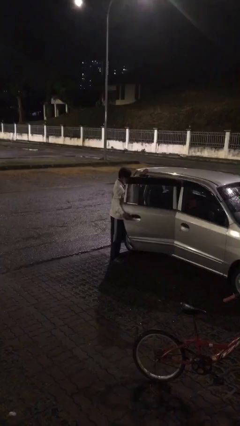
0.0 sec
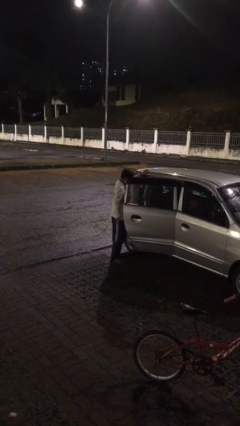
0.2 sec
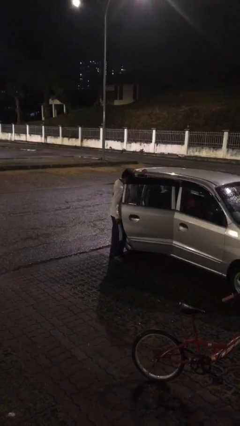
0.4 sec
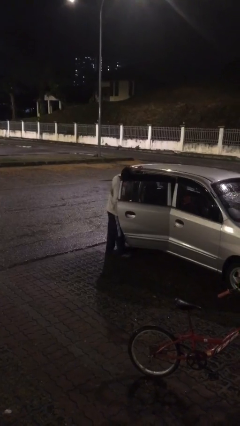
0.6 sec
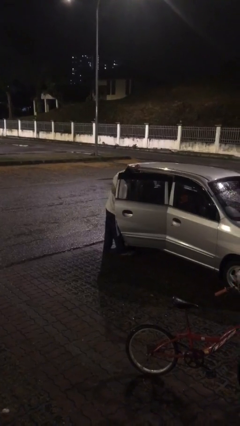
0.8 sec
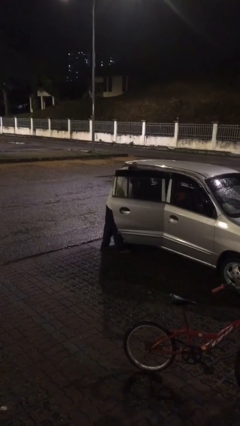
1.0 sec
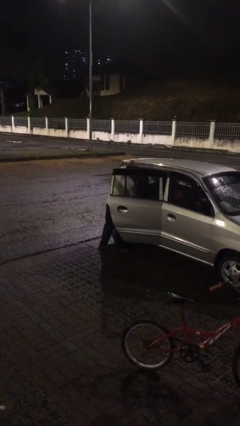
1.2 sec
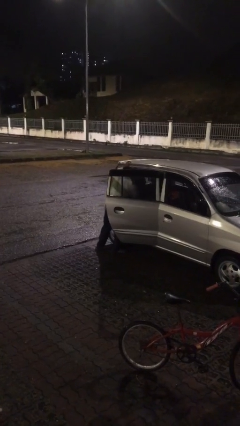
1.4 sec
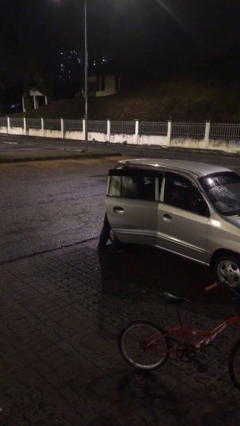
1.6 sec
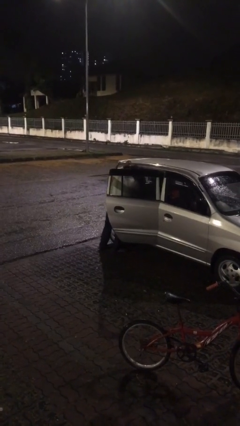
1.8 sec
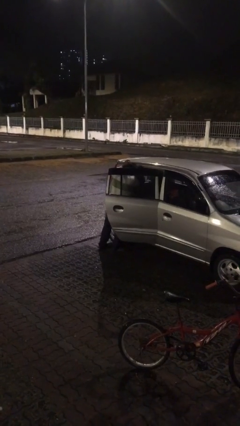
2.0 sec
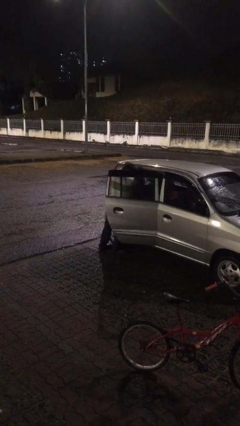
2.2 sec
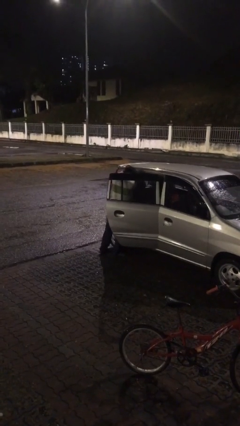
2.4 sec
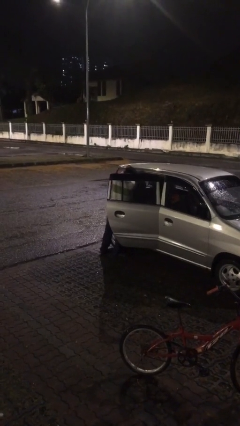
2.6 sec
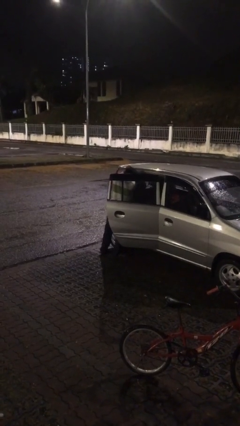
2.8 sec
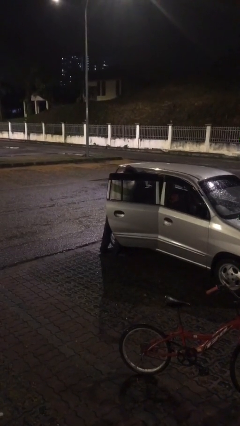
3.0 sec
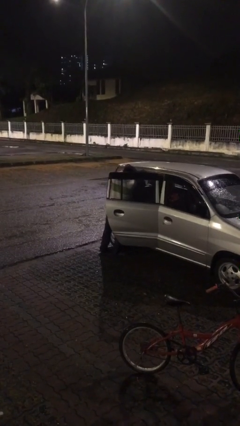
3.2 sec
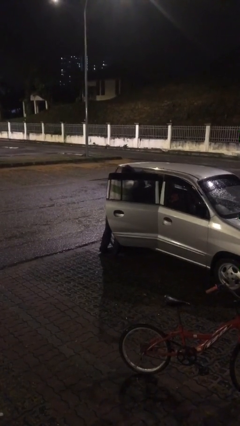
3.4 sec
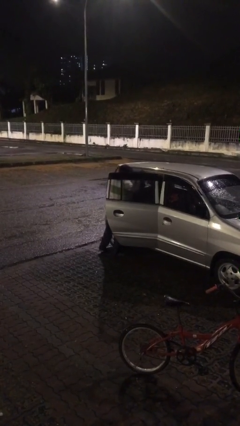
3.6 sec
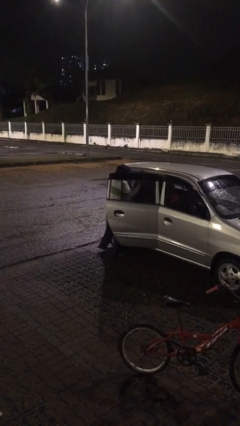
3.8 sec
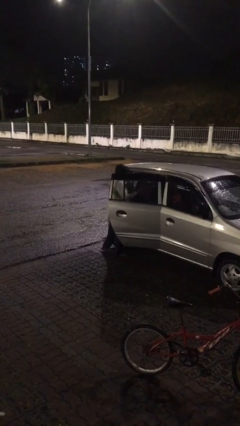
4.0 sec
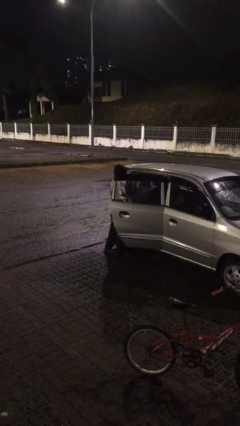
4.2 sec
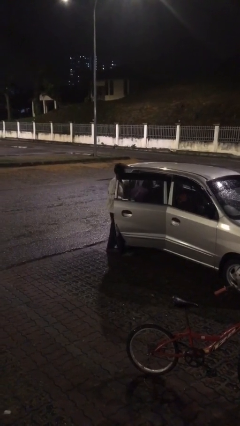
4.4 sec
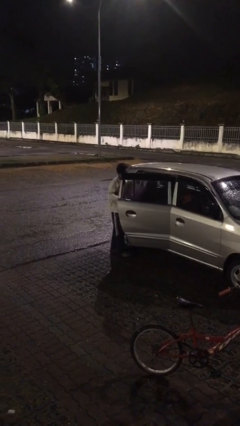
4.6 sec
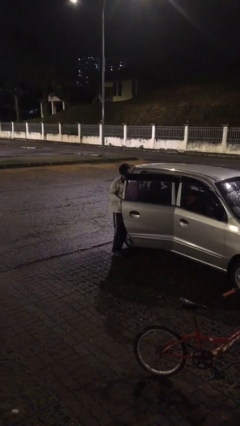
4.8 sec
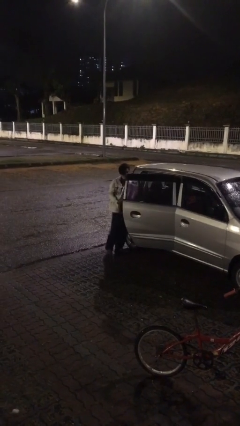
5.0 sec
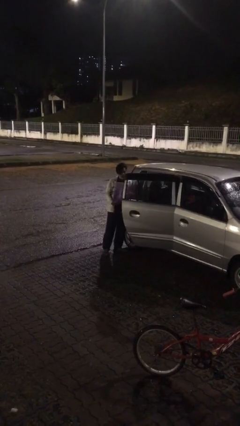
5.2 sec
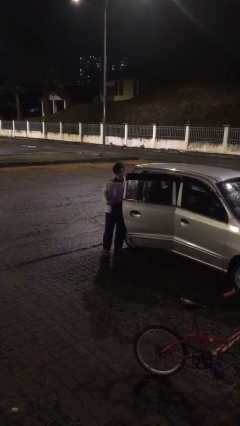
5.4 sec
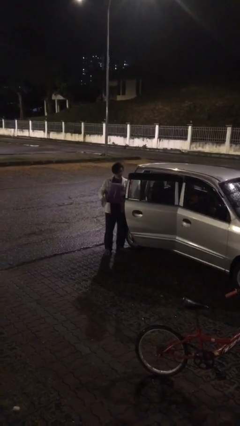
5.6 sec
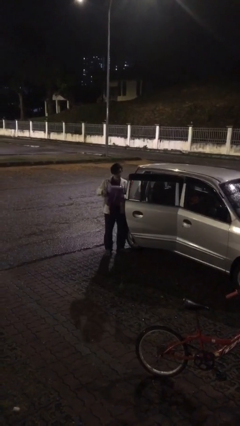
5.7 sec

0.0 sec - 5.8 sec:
person unloads car

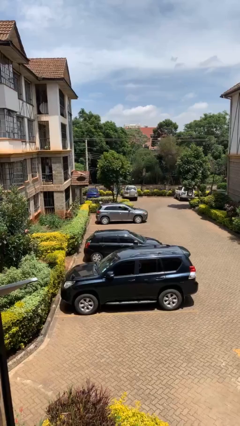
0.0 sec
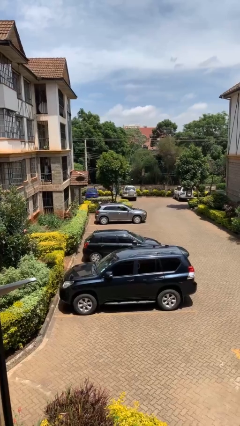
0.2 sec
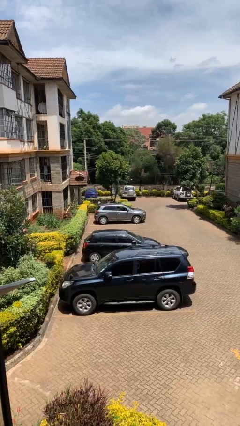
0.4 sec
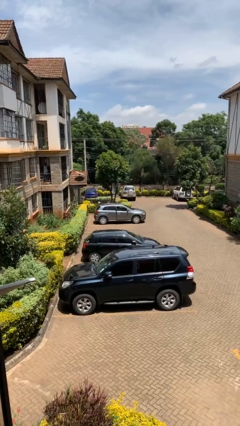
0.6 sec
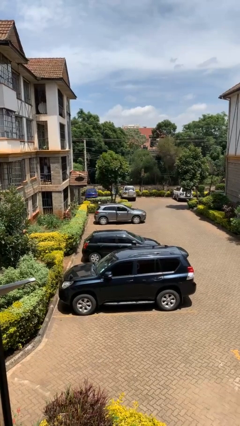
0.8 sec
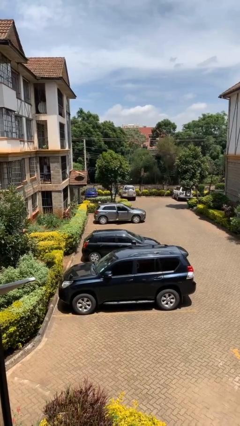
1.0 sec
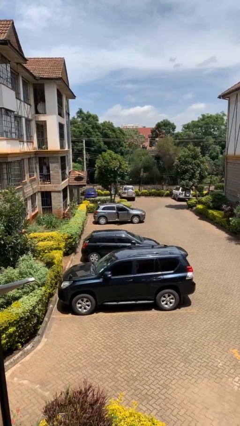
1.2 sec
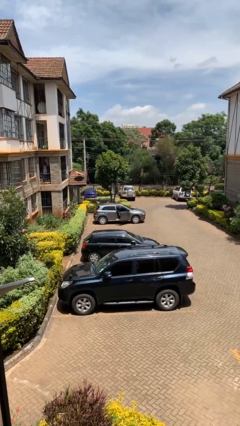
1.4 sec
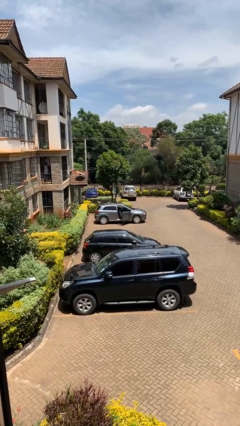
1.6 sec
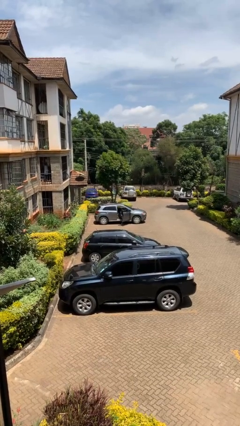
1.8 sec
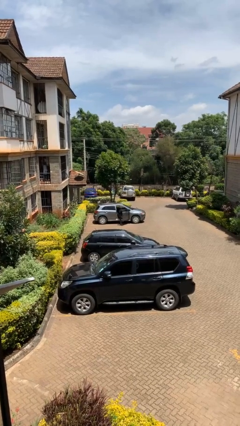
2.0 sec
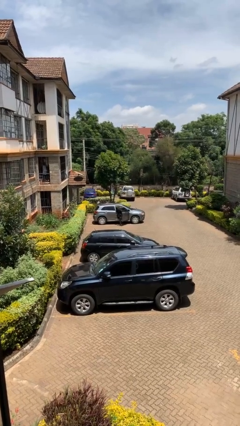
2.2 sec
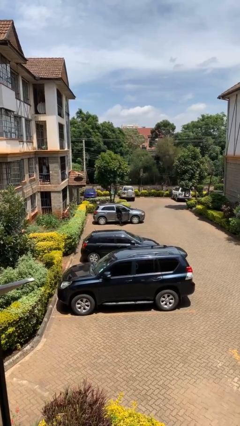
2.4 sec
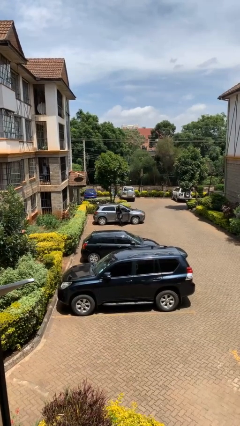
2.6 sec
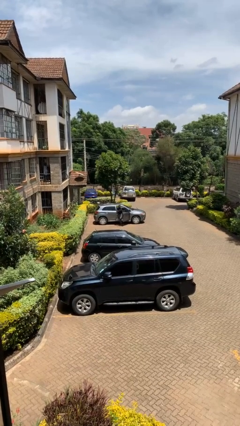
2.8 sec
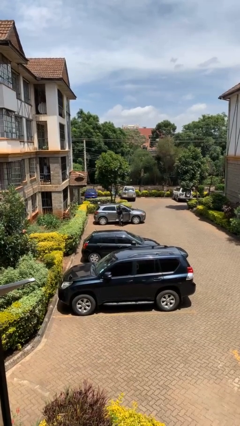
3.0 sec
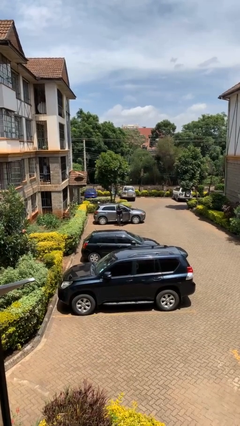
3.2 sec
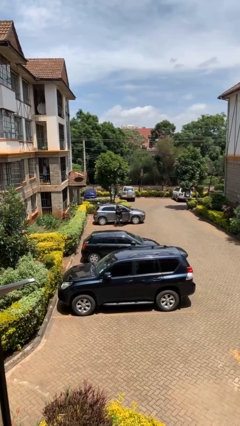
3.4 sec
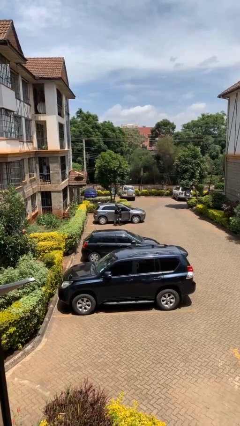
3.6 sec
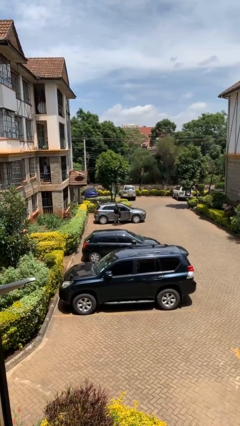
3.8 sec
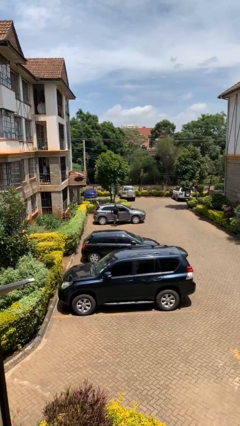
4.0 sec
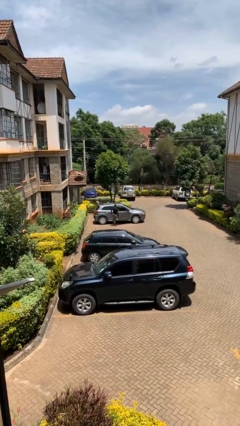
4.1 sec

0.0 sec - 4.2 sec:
car drops off person

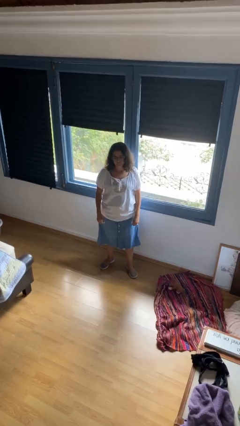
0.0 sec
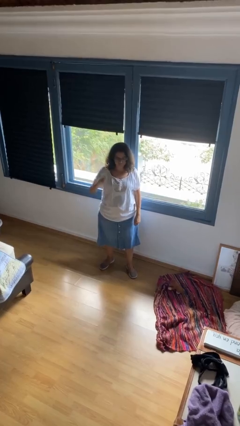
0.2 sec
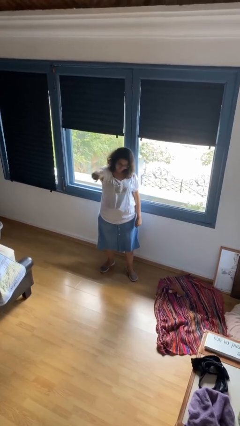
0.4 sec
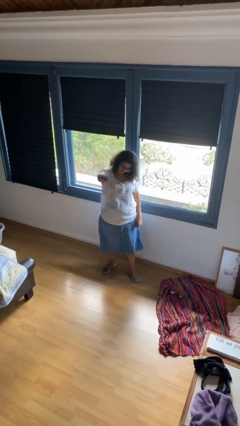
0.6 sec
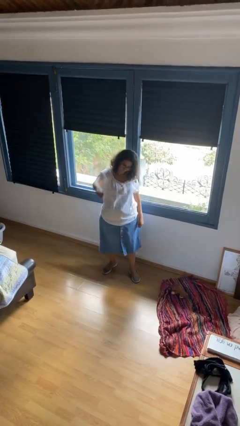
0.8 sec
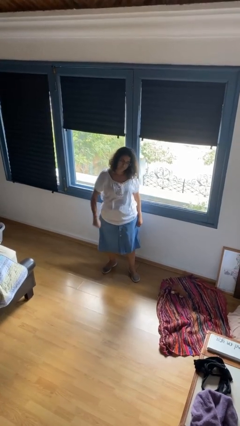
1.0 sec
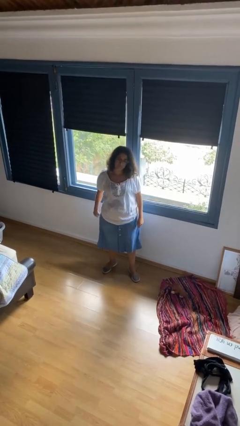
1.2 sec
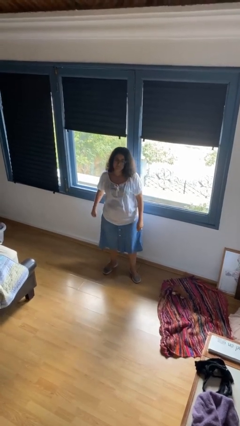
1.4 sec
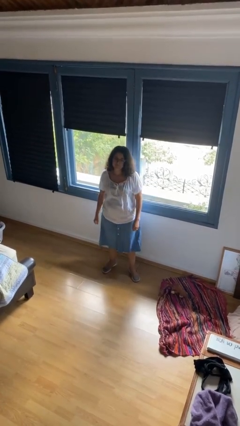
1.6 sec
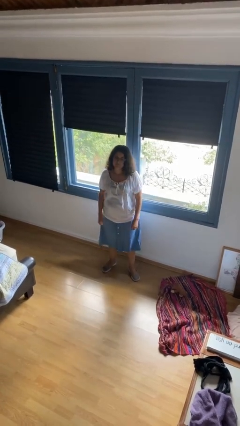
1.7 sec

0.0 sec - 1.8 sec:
person punches

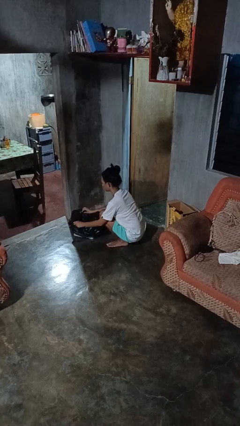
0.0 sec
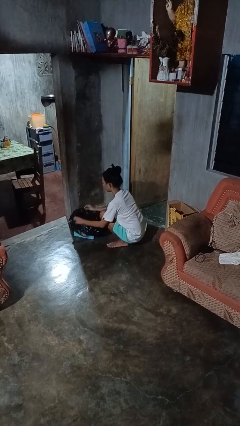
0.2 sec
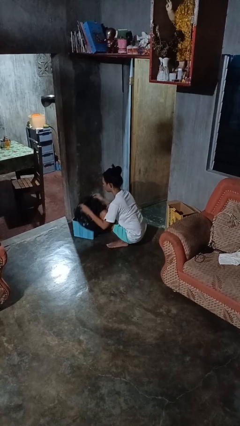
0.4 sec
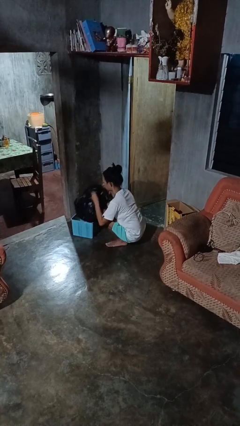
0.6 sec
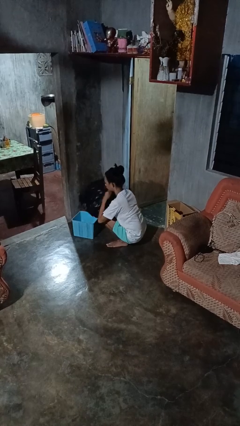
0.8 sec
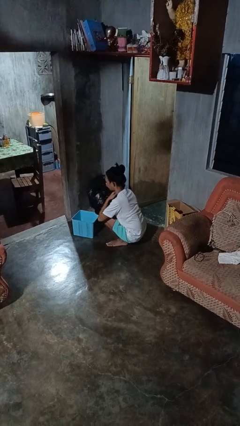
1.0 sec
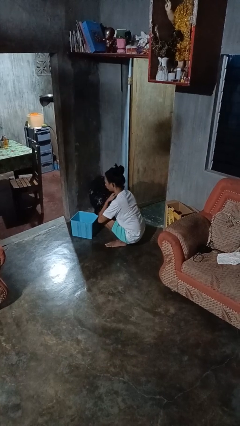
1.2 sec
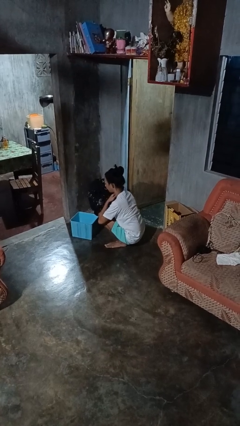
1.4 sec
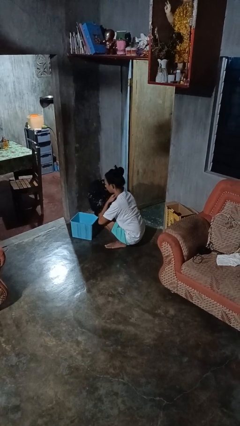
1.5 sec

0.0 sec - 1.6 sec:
person removes trashbag from trashcan

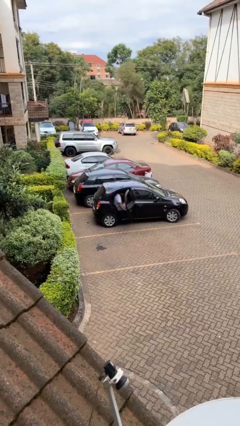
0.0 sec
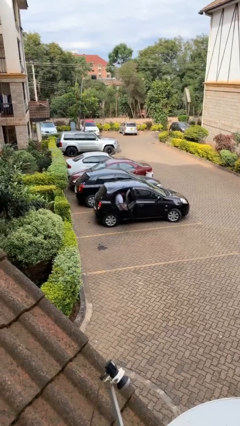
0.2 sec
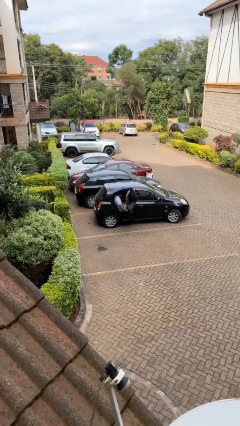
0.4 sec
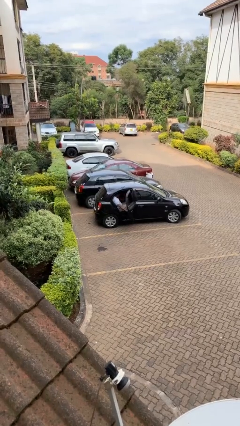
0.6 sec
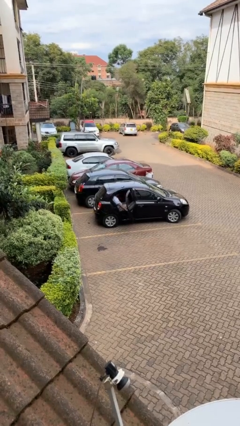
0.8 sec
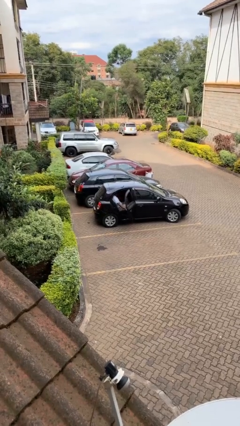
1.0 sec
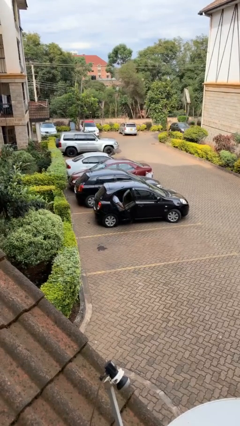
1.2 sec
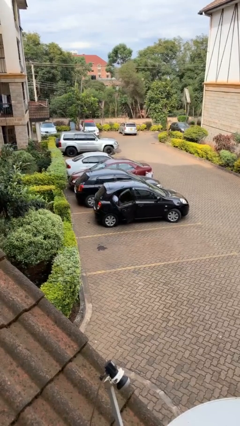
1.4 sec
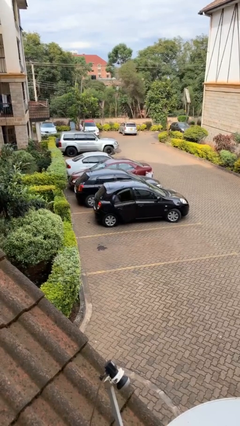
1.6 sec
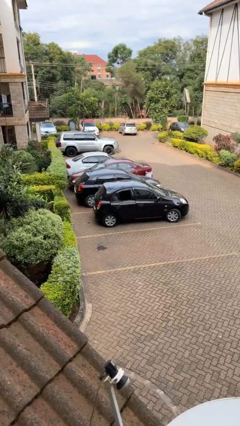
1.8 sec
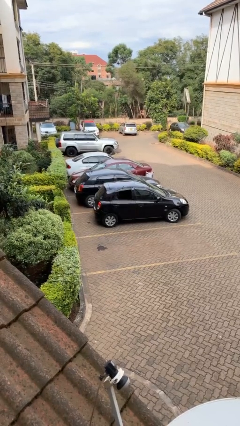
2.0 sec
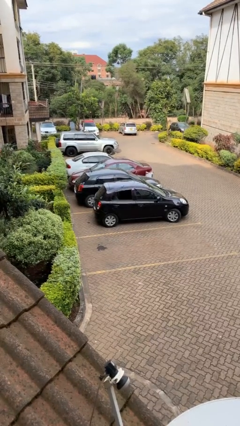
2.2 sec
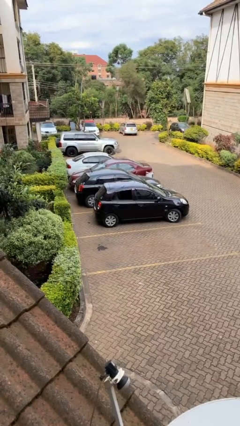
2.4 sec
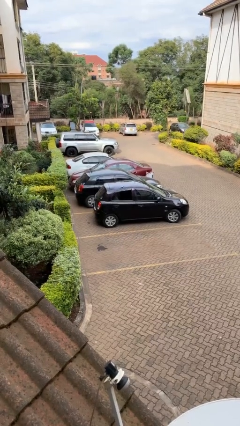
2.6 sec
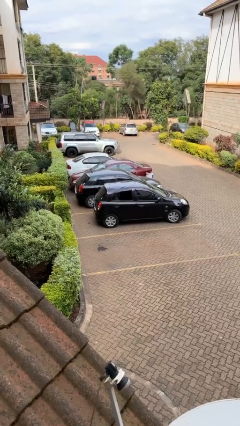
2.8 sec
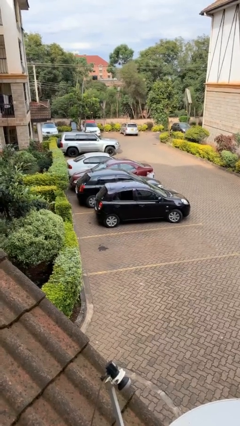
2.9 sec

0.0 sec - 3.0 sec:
person closes car door

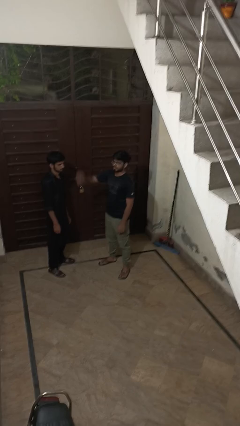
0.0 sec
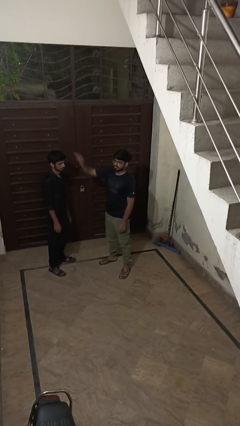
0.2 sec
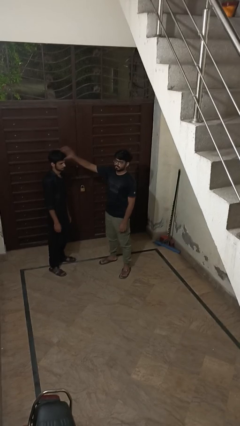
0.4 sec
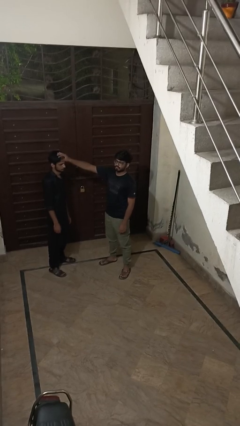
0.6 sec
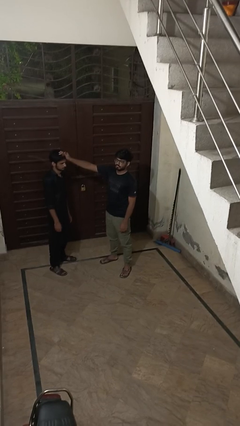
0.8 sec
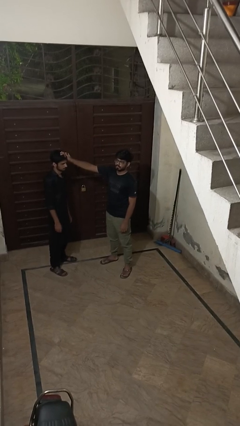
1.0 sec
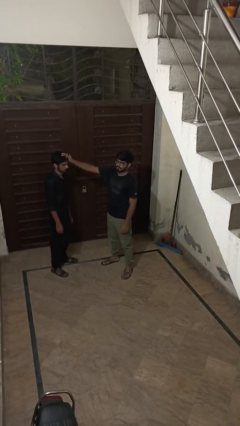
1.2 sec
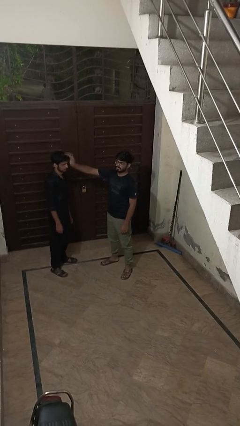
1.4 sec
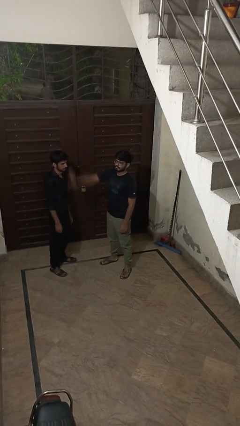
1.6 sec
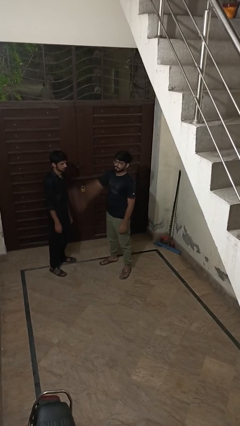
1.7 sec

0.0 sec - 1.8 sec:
person grabs person by hair
